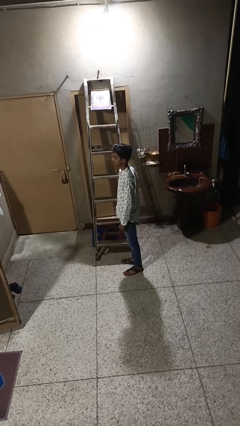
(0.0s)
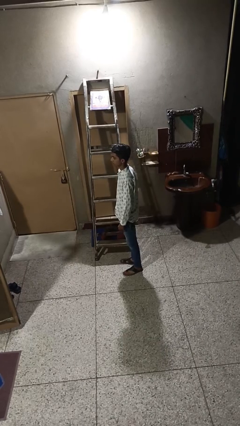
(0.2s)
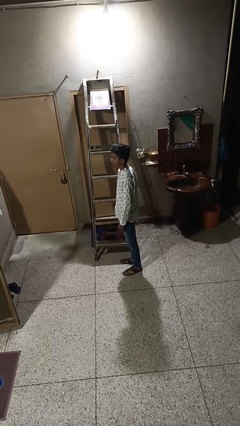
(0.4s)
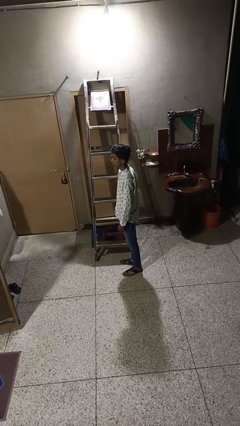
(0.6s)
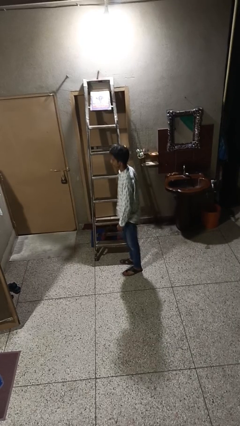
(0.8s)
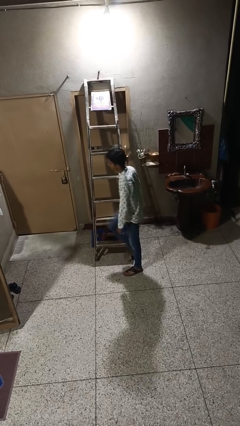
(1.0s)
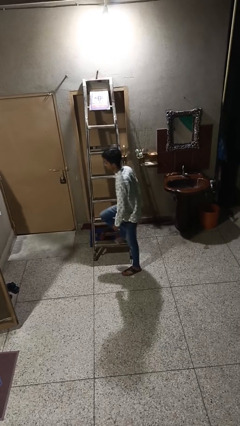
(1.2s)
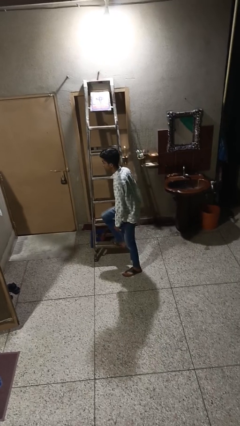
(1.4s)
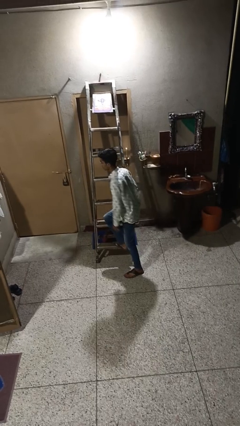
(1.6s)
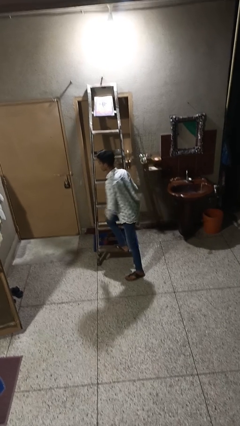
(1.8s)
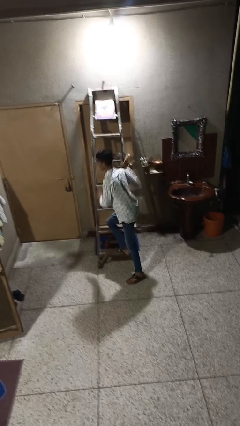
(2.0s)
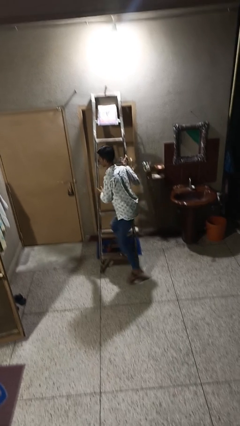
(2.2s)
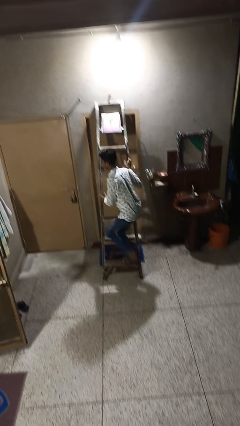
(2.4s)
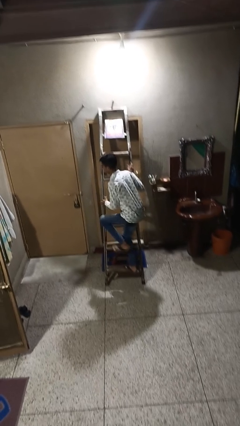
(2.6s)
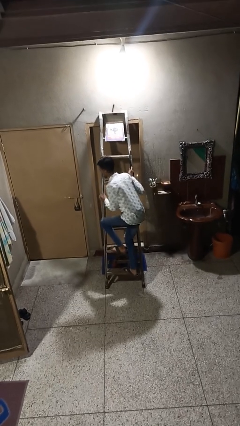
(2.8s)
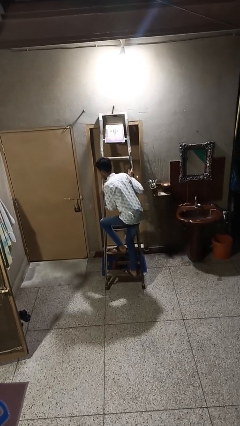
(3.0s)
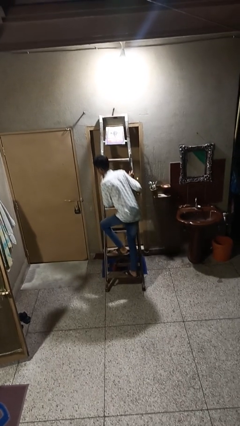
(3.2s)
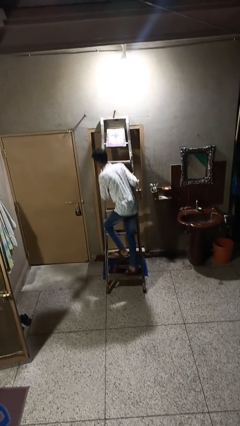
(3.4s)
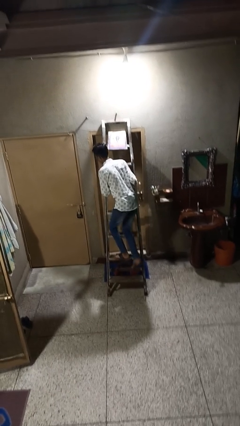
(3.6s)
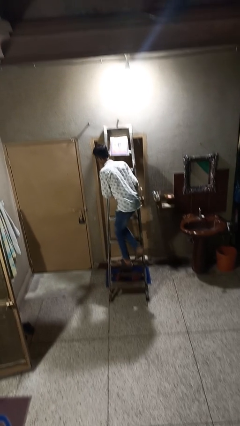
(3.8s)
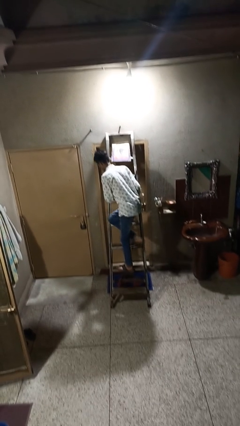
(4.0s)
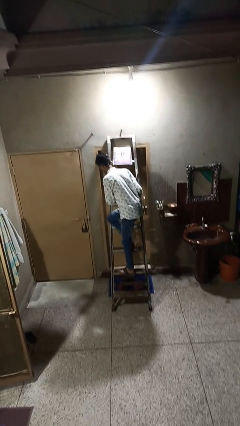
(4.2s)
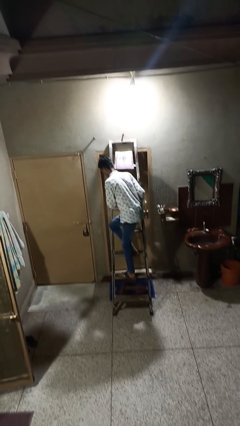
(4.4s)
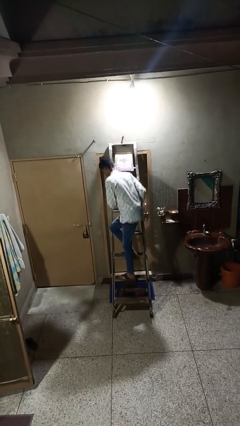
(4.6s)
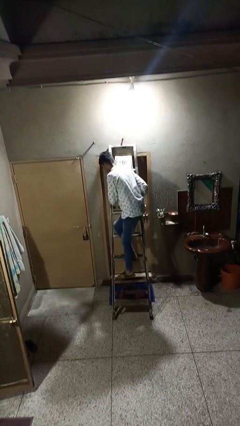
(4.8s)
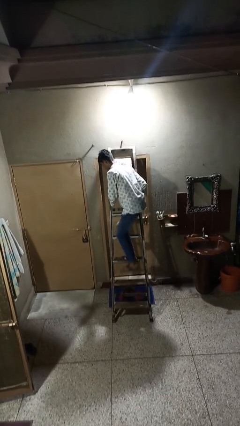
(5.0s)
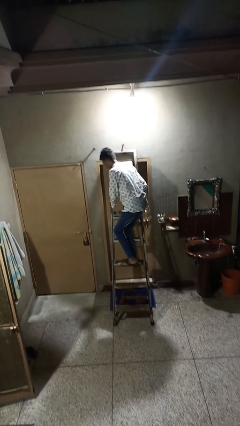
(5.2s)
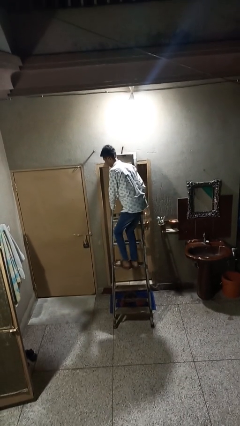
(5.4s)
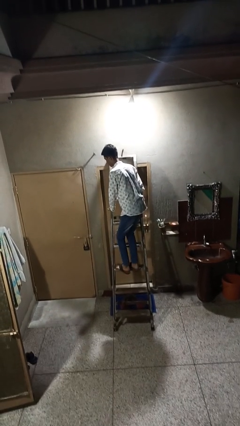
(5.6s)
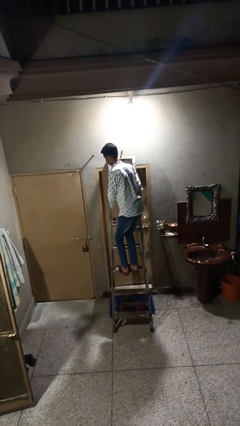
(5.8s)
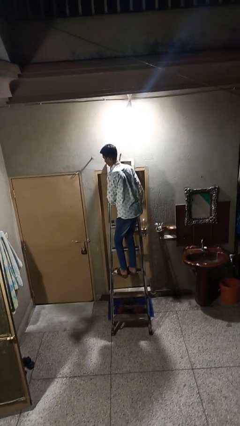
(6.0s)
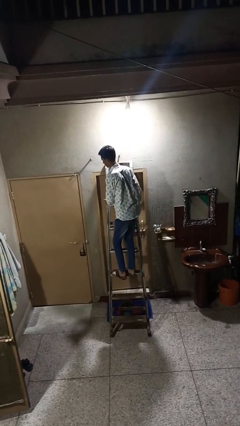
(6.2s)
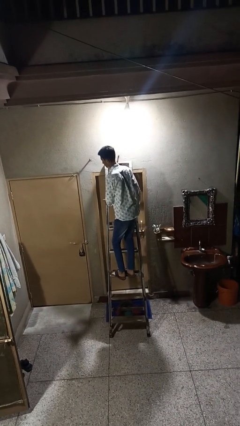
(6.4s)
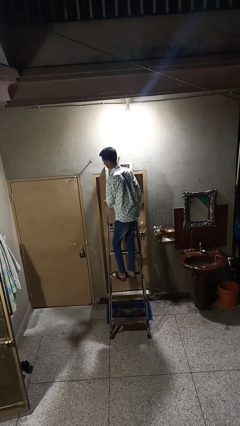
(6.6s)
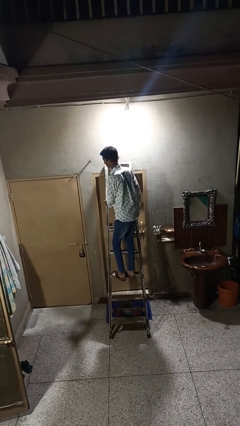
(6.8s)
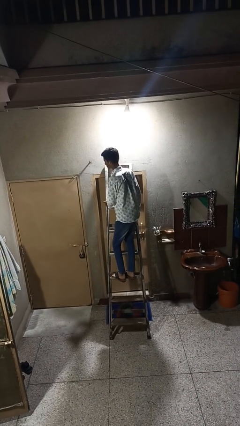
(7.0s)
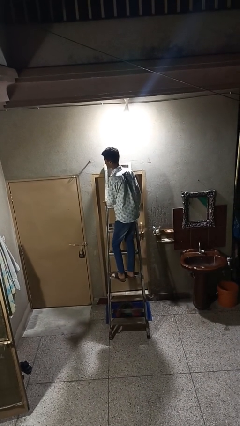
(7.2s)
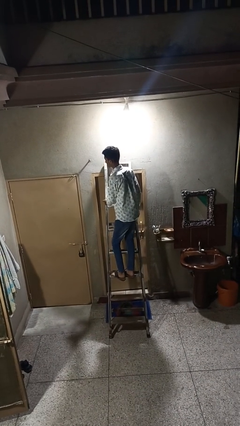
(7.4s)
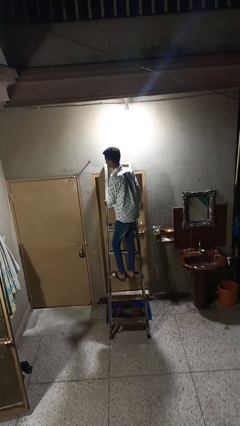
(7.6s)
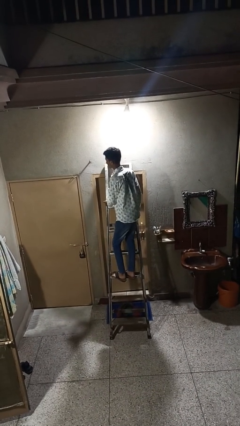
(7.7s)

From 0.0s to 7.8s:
person climbs up ladder

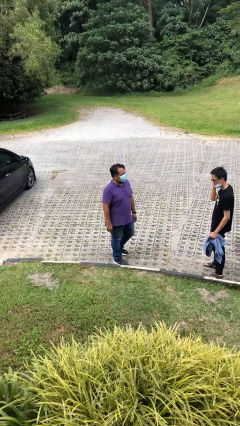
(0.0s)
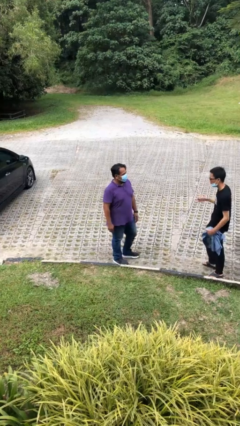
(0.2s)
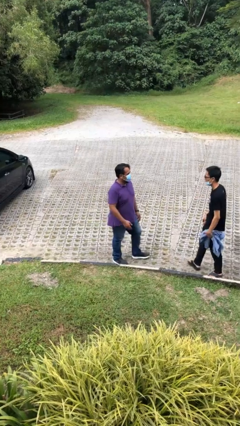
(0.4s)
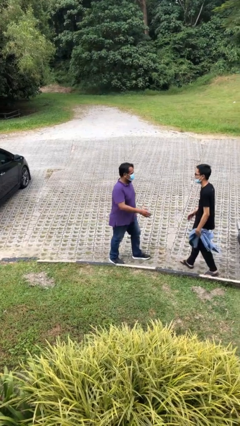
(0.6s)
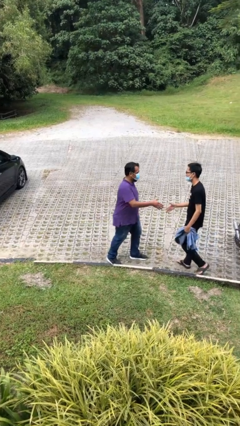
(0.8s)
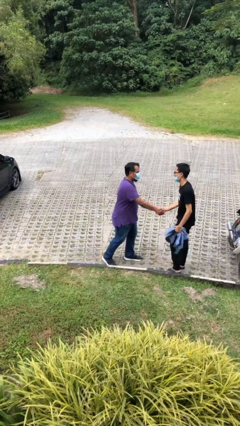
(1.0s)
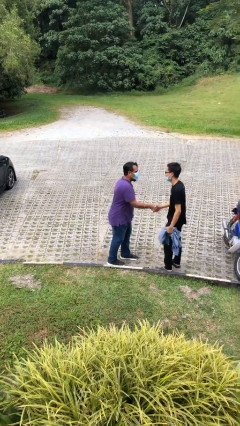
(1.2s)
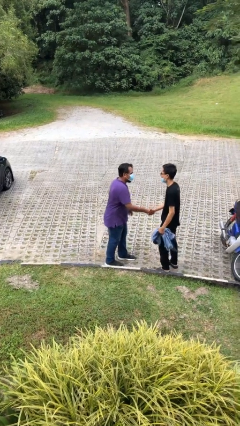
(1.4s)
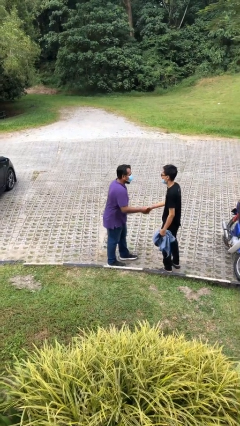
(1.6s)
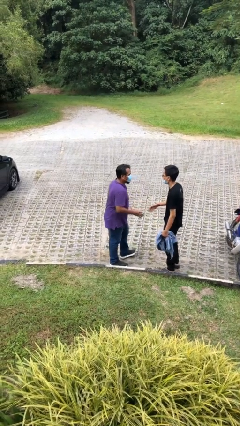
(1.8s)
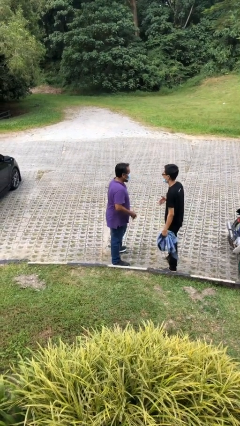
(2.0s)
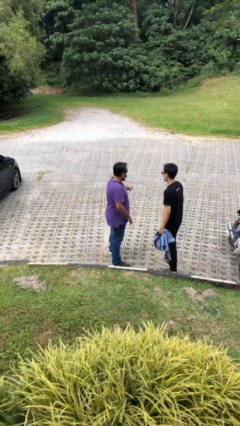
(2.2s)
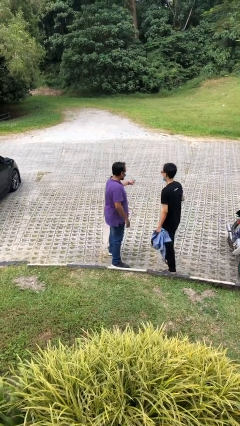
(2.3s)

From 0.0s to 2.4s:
person shakes hand

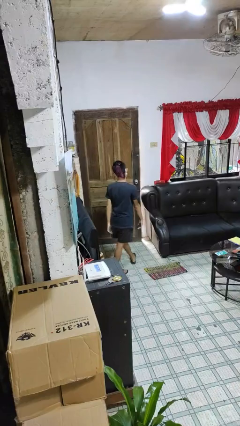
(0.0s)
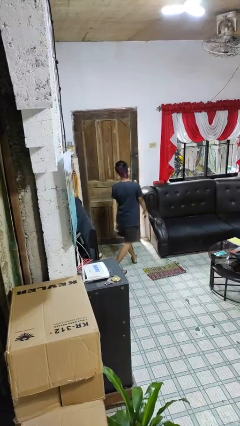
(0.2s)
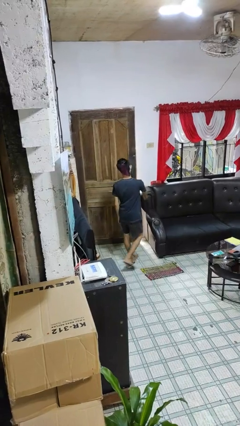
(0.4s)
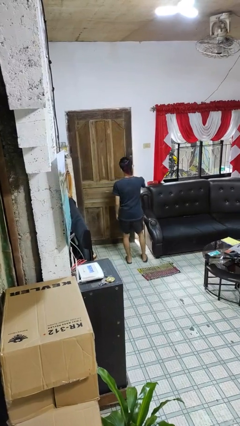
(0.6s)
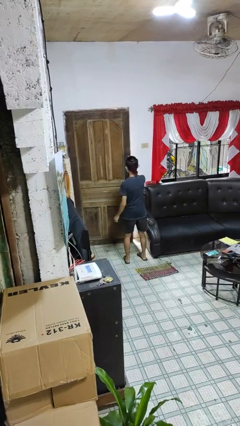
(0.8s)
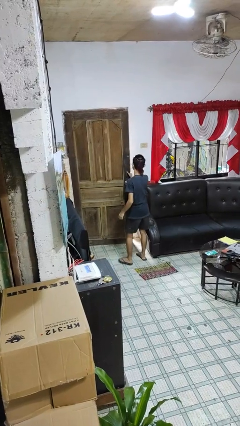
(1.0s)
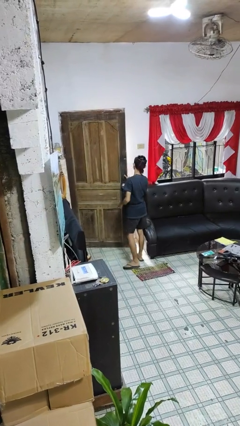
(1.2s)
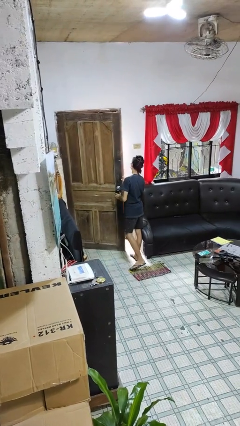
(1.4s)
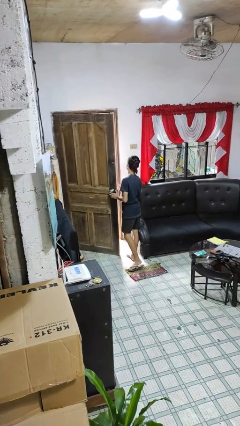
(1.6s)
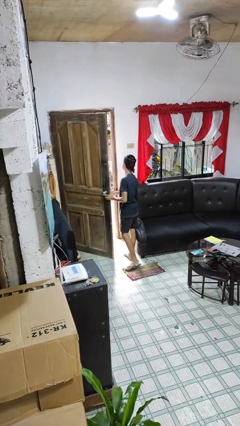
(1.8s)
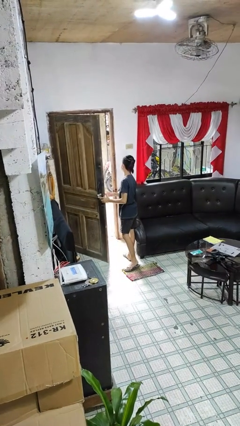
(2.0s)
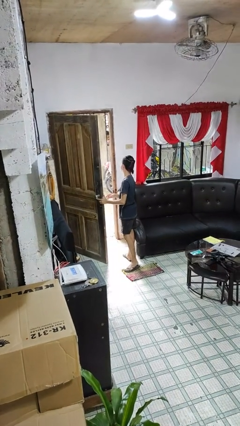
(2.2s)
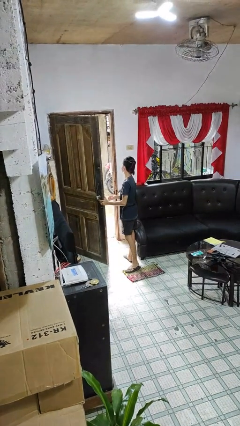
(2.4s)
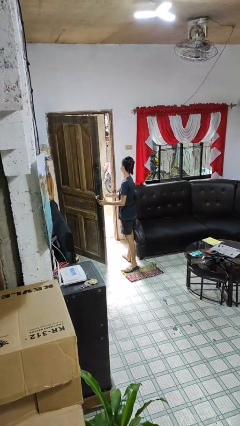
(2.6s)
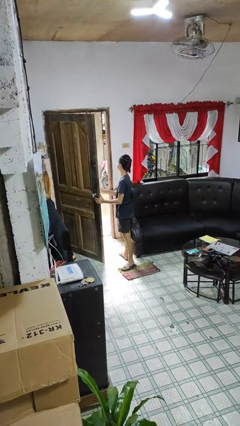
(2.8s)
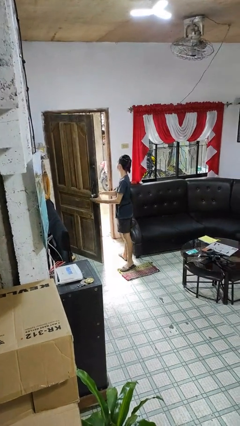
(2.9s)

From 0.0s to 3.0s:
person opens facility door

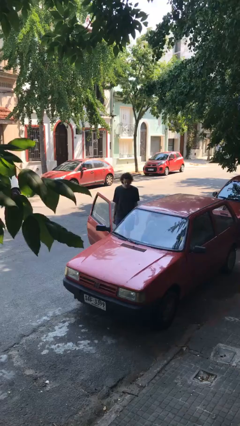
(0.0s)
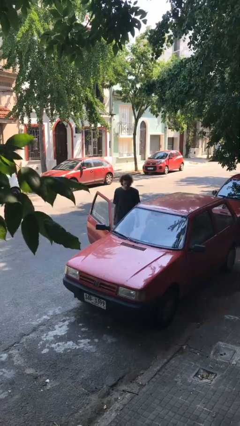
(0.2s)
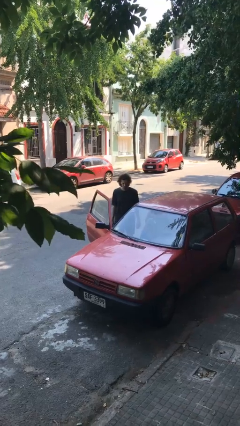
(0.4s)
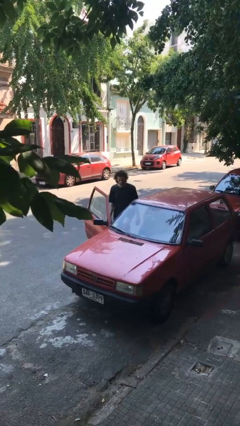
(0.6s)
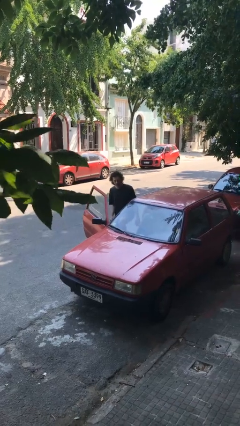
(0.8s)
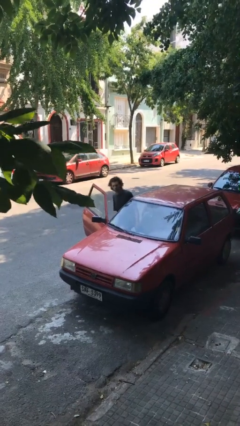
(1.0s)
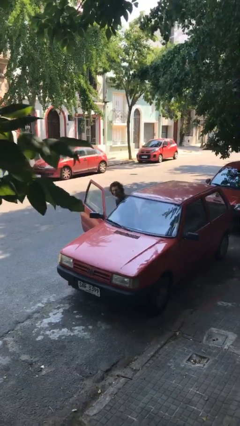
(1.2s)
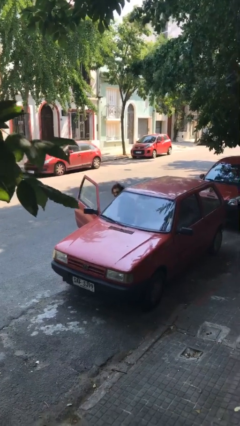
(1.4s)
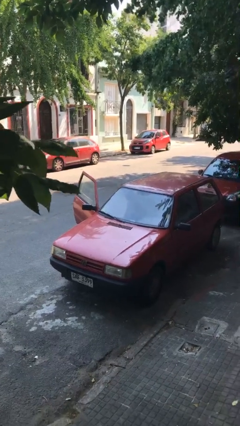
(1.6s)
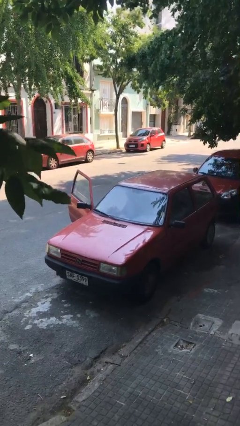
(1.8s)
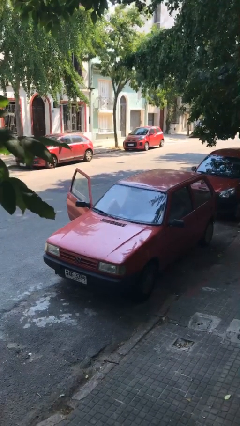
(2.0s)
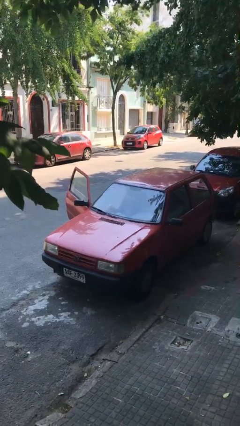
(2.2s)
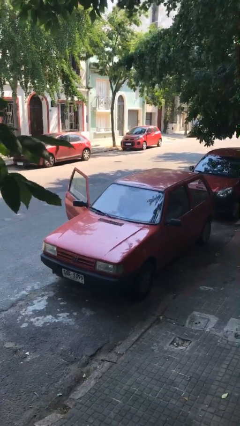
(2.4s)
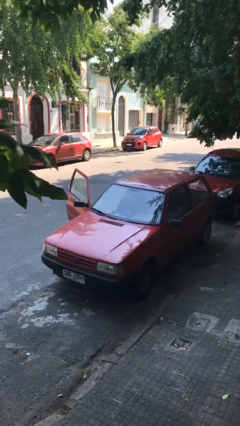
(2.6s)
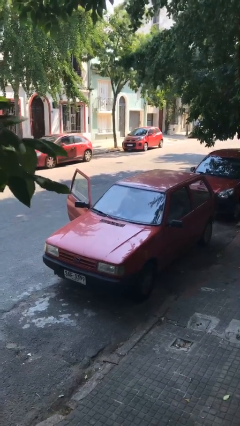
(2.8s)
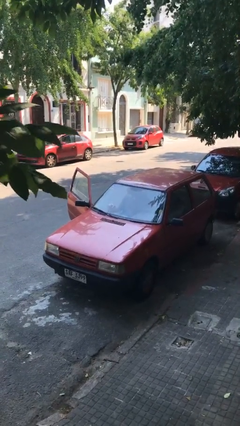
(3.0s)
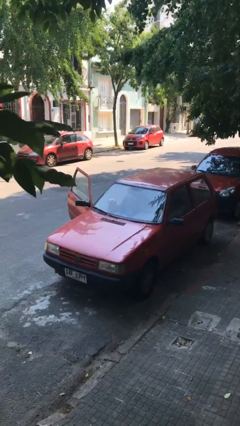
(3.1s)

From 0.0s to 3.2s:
person enters car

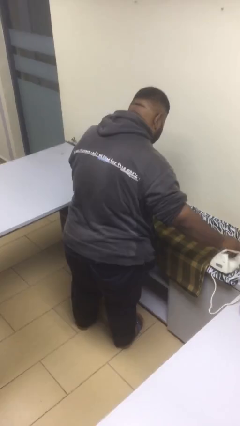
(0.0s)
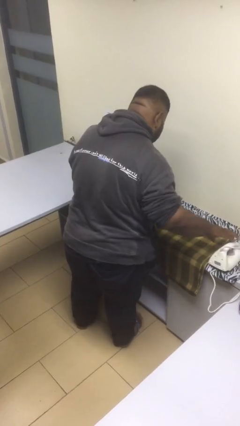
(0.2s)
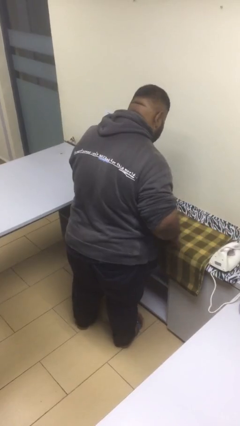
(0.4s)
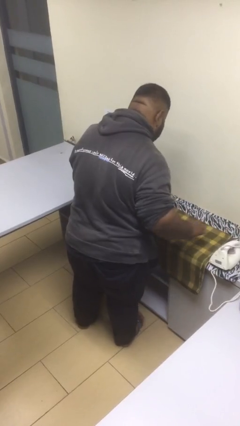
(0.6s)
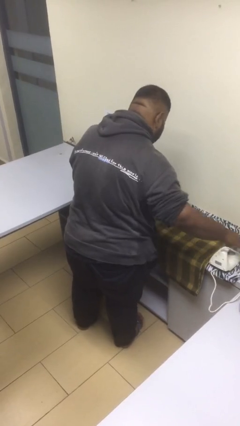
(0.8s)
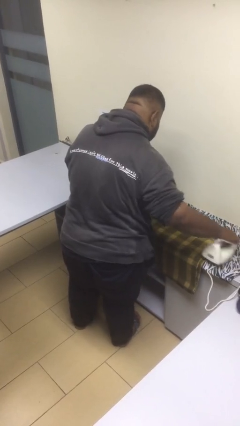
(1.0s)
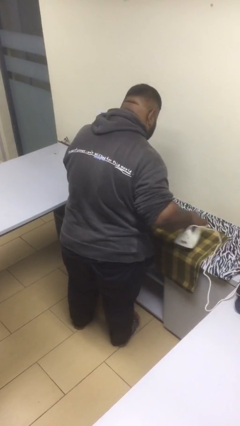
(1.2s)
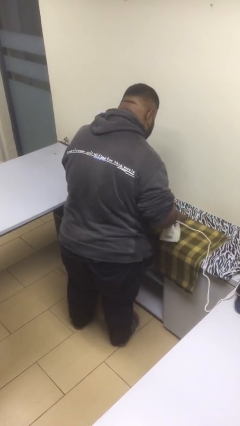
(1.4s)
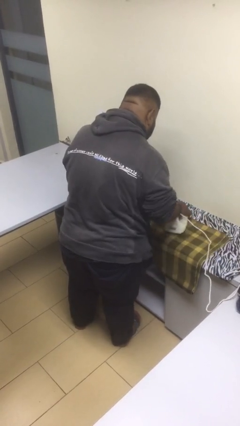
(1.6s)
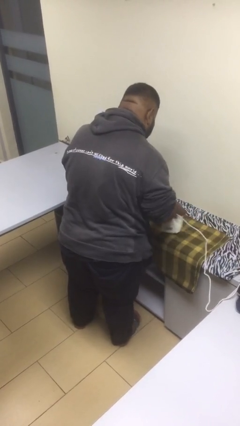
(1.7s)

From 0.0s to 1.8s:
person irons clothes
